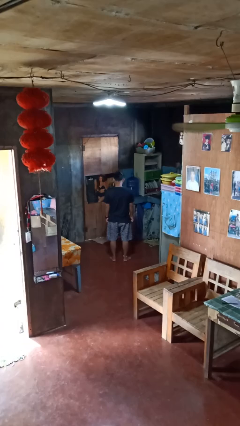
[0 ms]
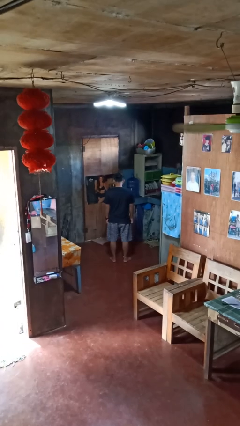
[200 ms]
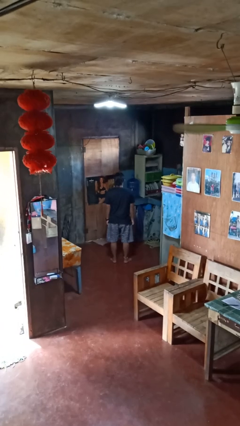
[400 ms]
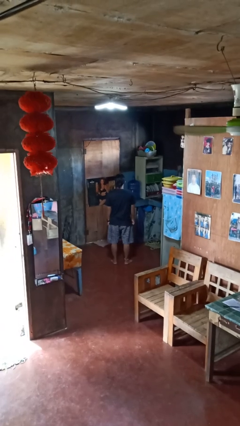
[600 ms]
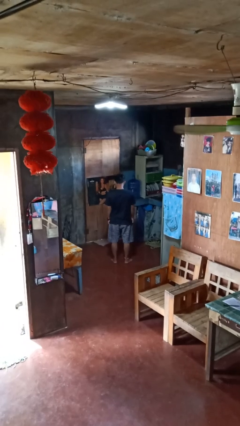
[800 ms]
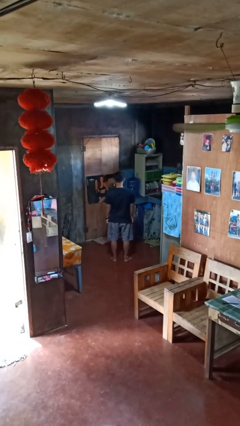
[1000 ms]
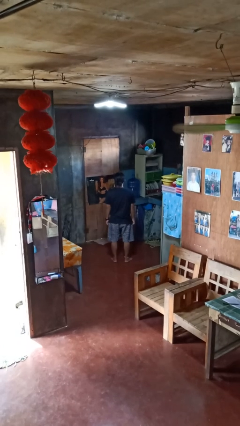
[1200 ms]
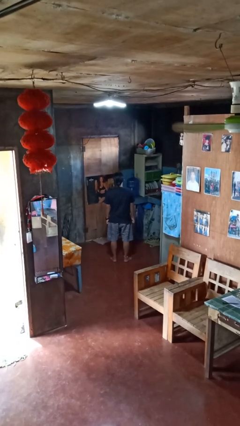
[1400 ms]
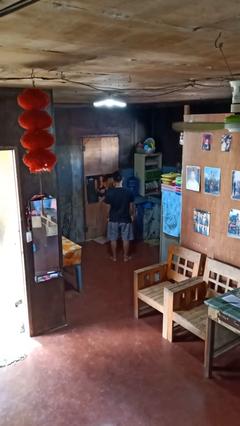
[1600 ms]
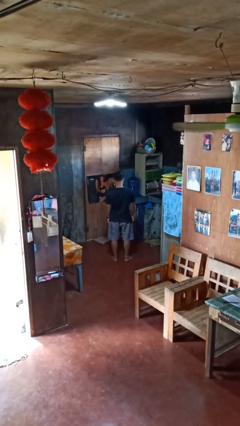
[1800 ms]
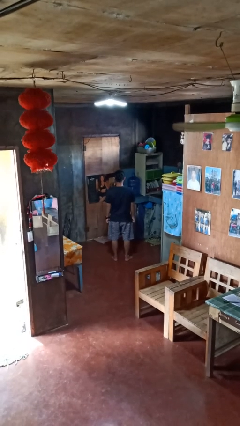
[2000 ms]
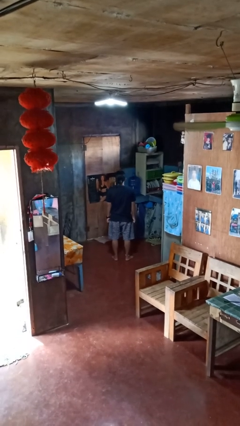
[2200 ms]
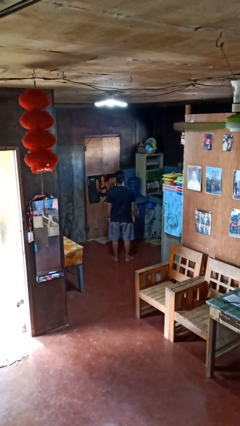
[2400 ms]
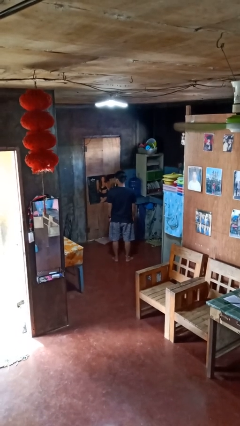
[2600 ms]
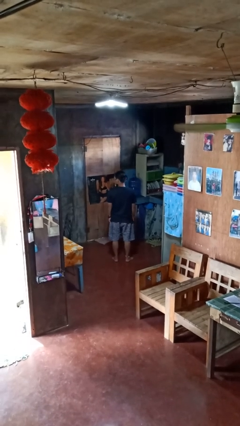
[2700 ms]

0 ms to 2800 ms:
person nods head

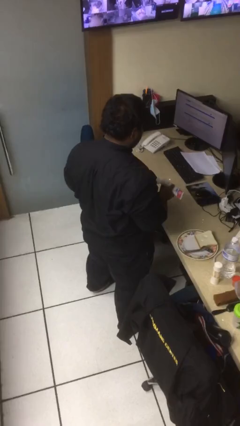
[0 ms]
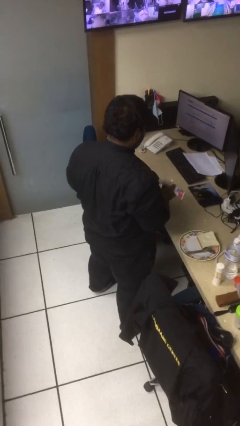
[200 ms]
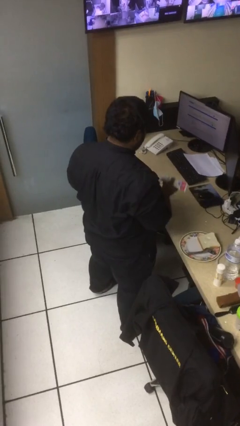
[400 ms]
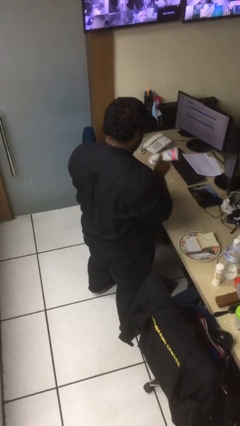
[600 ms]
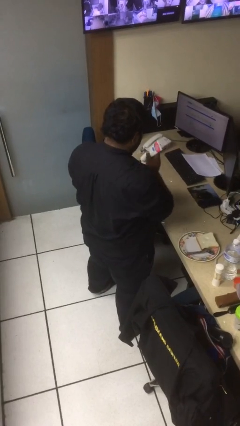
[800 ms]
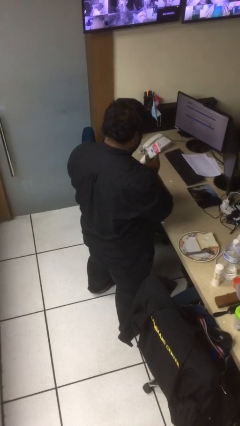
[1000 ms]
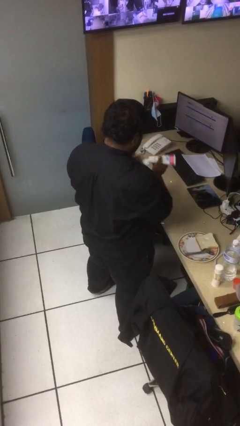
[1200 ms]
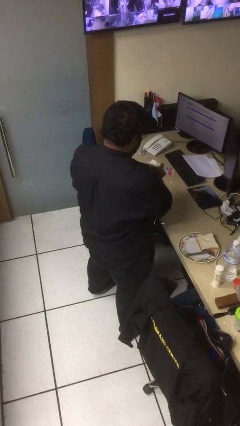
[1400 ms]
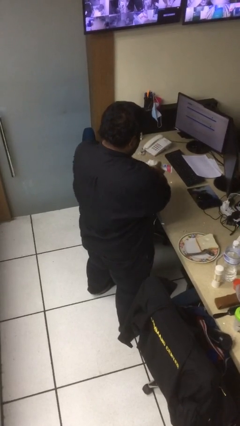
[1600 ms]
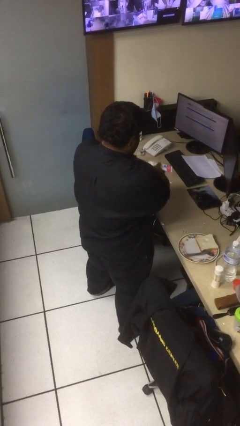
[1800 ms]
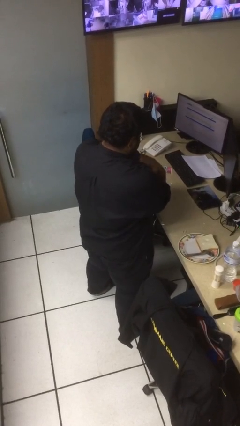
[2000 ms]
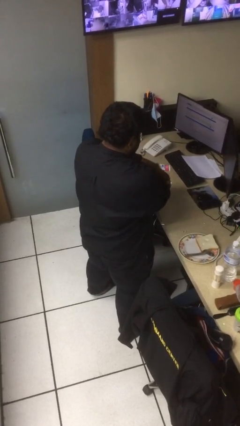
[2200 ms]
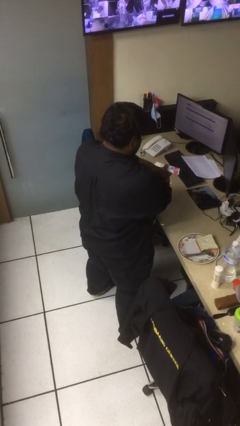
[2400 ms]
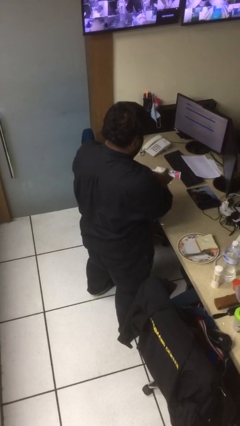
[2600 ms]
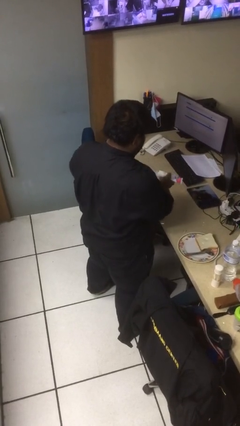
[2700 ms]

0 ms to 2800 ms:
person applies sunscreen

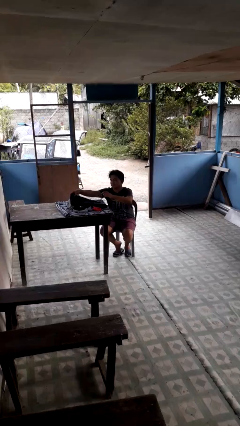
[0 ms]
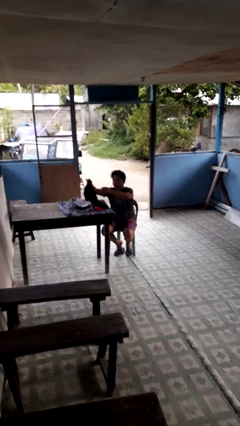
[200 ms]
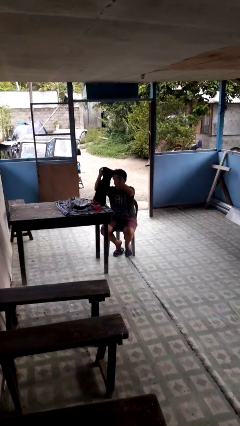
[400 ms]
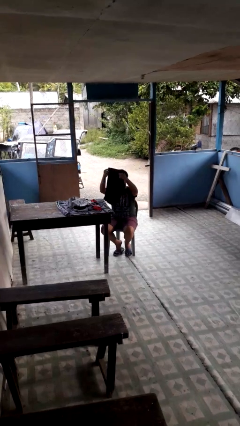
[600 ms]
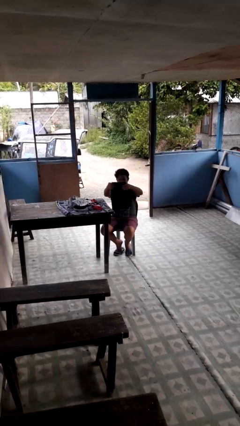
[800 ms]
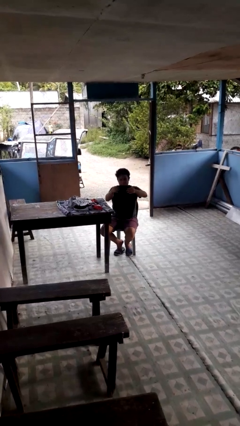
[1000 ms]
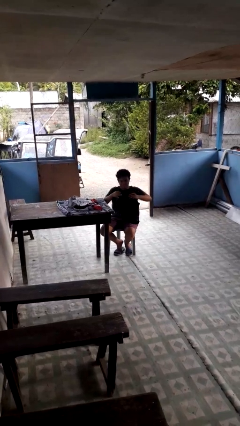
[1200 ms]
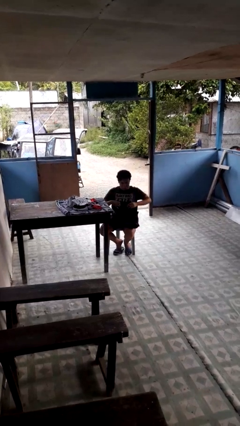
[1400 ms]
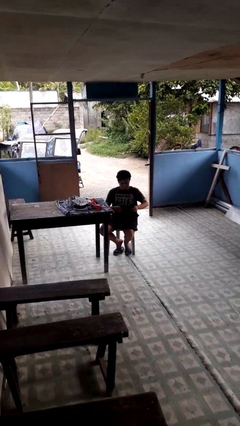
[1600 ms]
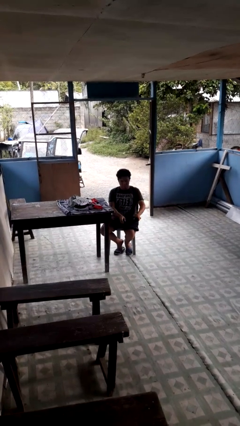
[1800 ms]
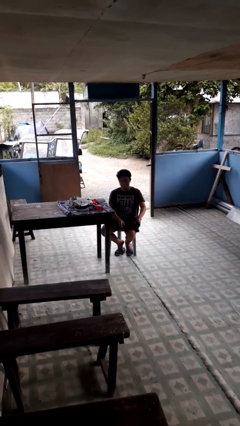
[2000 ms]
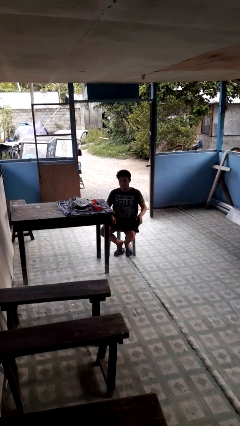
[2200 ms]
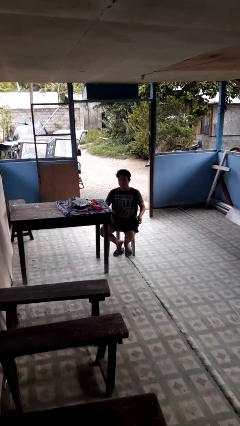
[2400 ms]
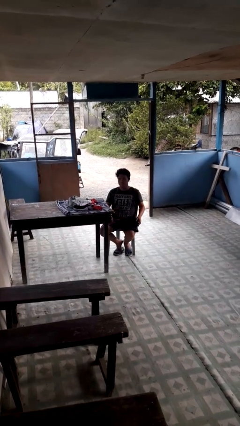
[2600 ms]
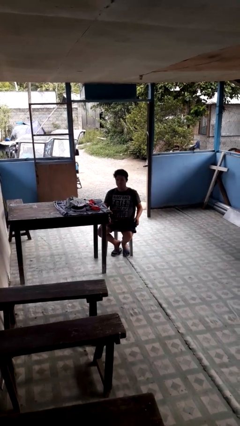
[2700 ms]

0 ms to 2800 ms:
person folds pants

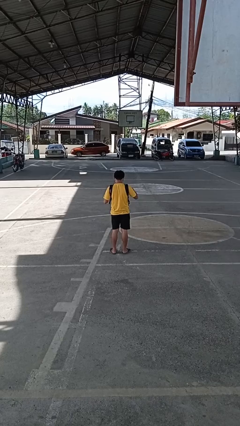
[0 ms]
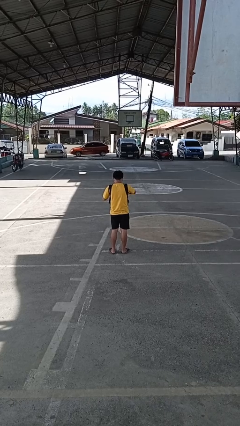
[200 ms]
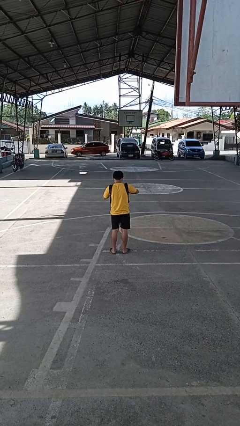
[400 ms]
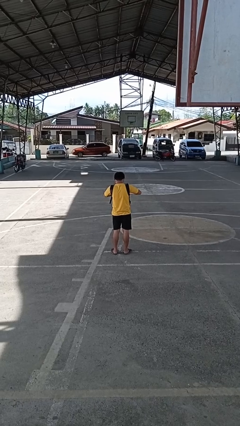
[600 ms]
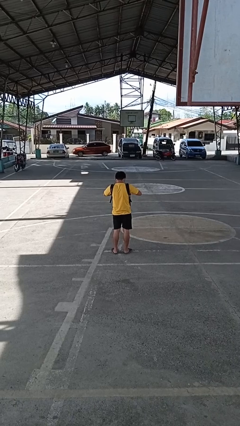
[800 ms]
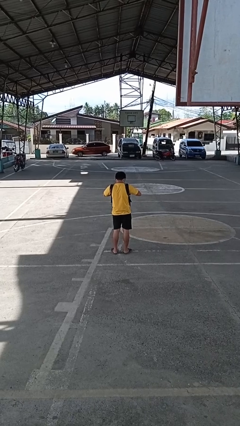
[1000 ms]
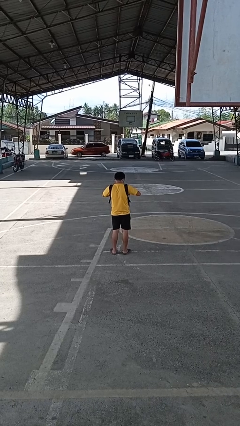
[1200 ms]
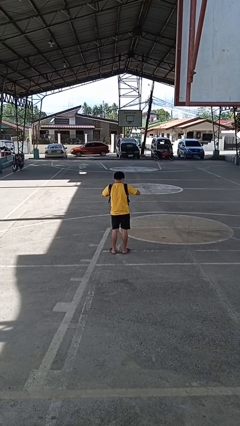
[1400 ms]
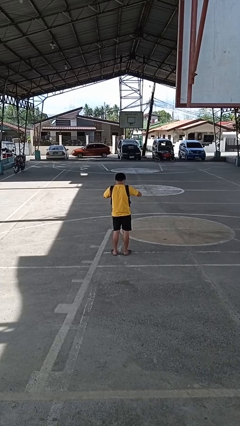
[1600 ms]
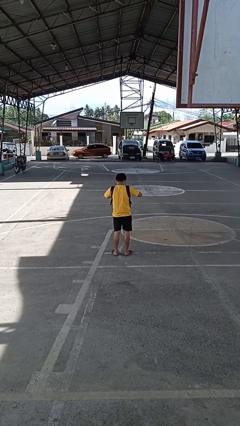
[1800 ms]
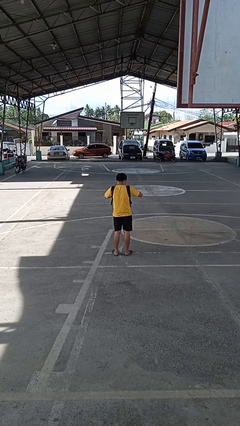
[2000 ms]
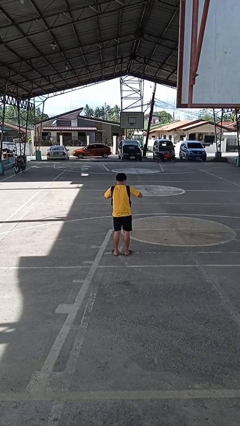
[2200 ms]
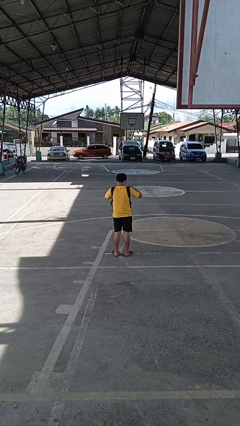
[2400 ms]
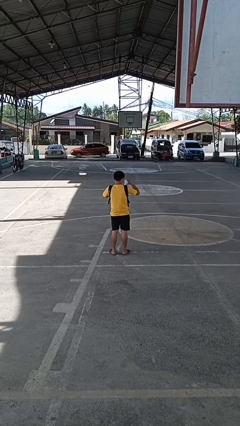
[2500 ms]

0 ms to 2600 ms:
person searches in backpack

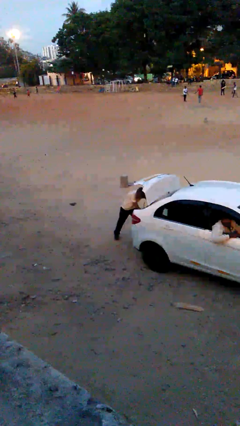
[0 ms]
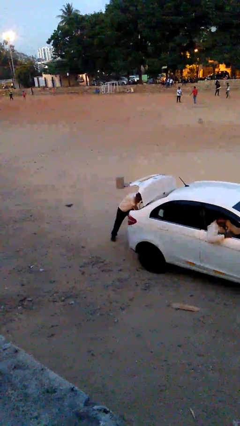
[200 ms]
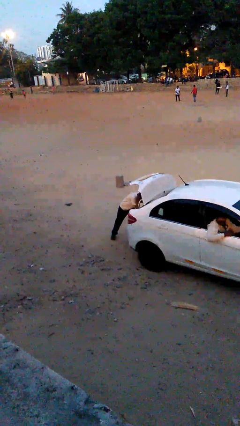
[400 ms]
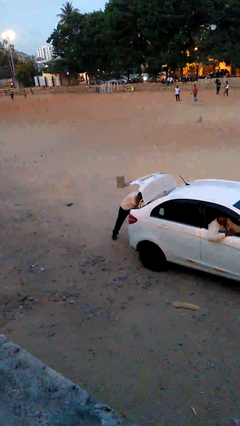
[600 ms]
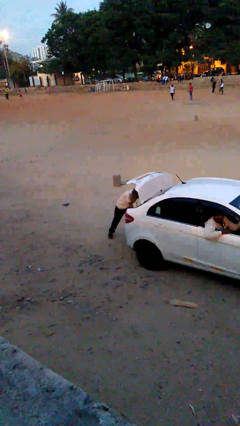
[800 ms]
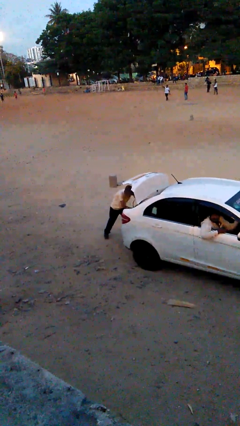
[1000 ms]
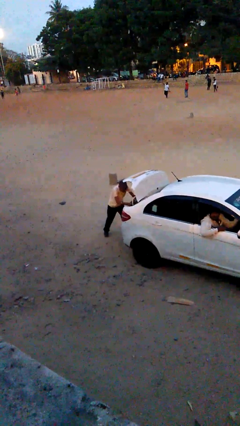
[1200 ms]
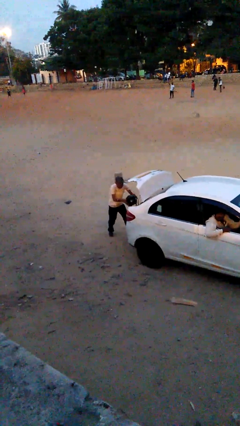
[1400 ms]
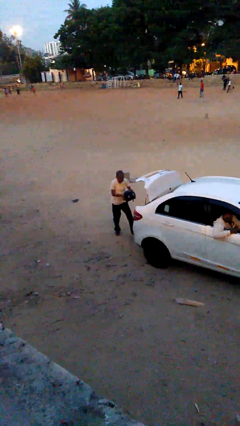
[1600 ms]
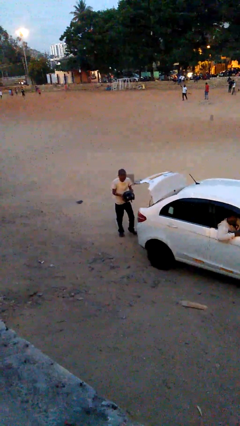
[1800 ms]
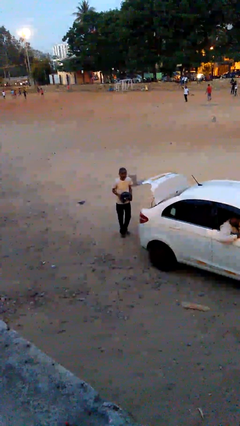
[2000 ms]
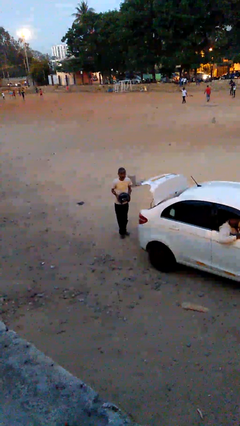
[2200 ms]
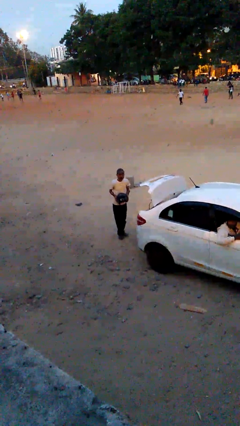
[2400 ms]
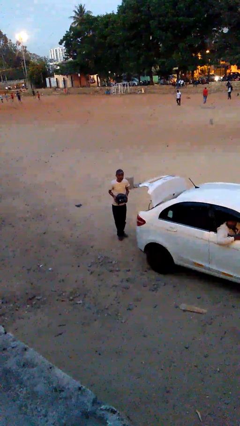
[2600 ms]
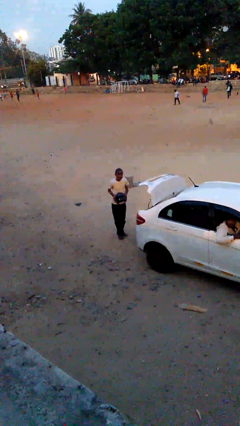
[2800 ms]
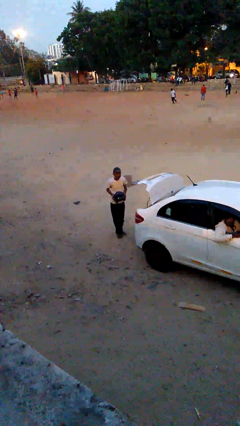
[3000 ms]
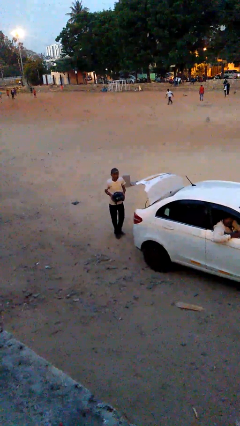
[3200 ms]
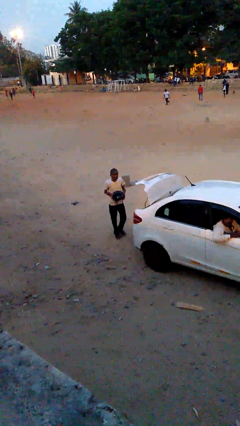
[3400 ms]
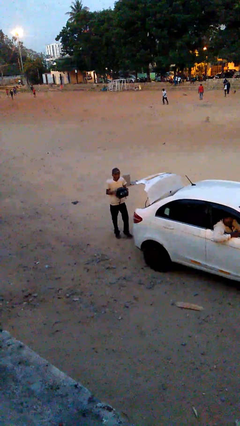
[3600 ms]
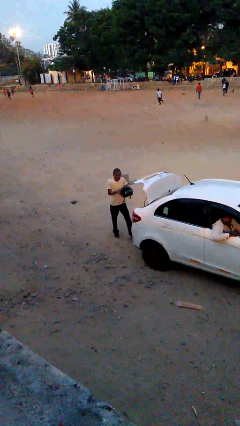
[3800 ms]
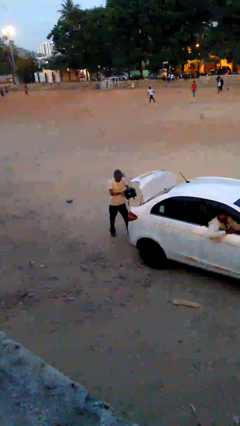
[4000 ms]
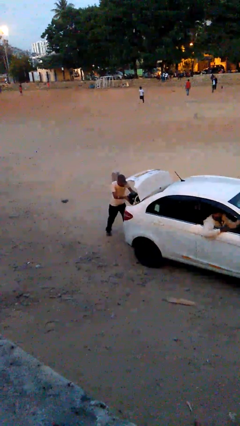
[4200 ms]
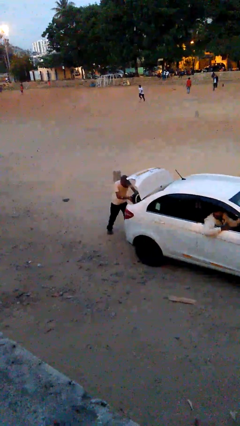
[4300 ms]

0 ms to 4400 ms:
person unloads car

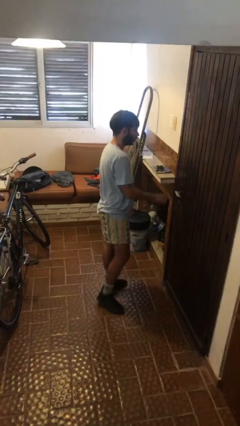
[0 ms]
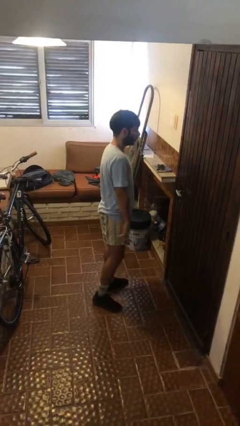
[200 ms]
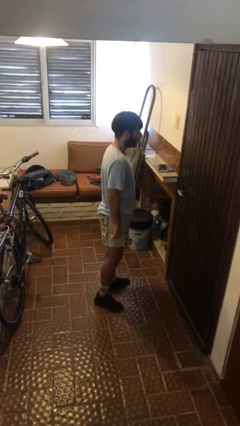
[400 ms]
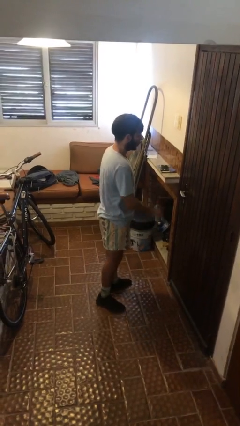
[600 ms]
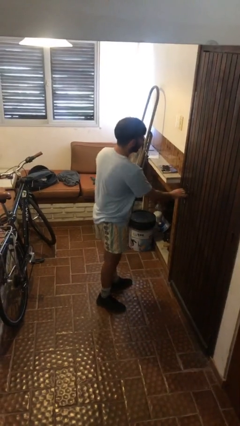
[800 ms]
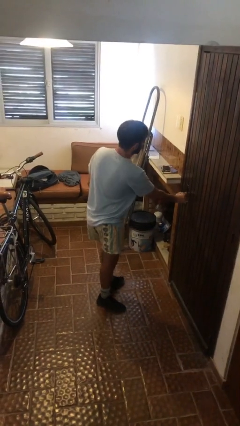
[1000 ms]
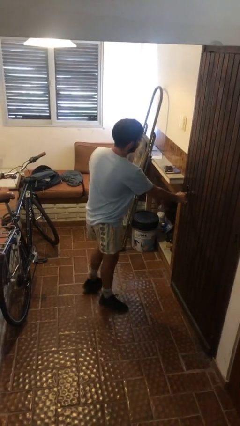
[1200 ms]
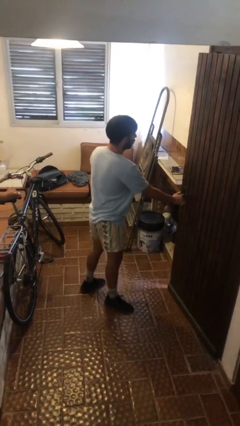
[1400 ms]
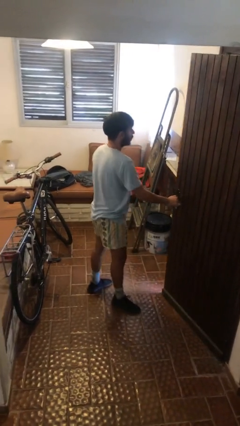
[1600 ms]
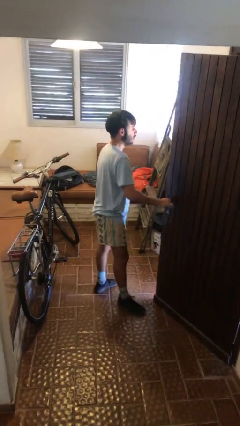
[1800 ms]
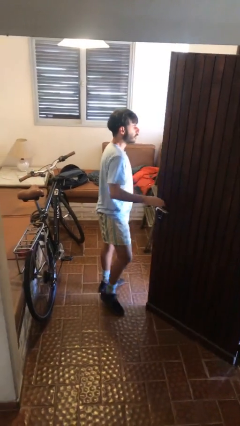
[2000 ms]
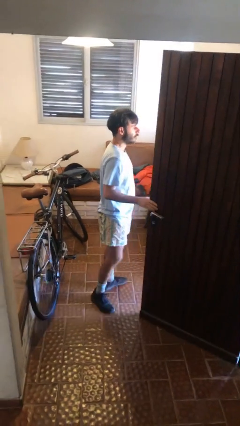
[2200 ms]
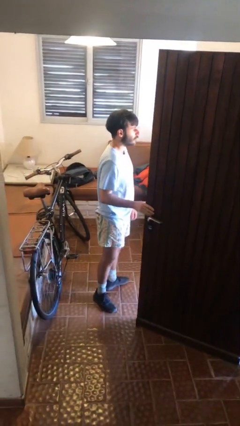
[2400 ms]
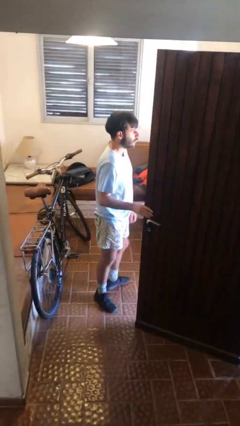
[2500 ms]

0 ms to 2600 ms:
person opens facility door
